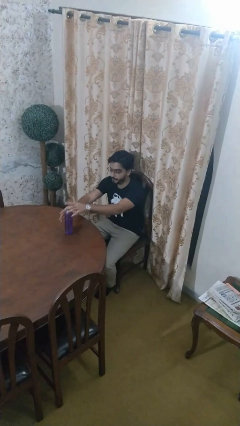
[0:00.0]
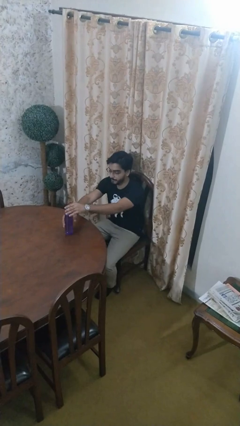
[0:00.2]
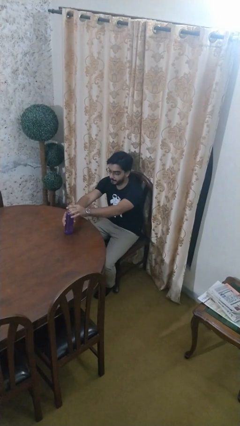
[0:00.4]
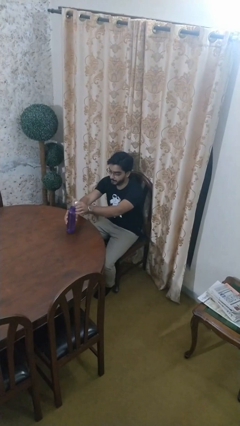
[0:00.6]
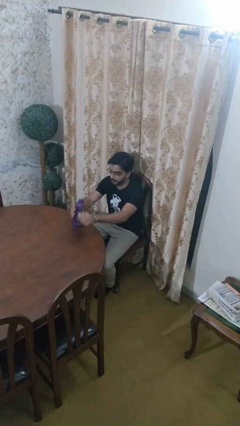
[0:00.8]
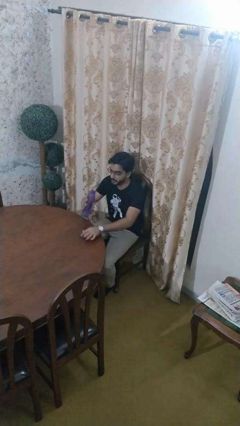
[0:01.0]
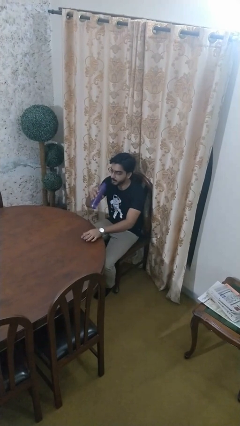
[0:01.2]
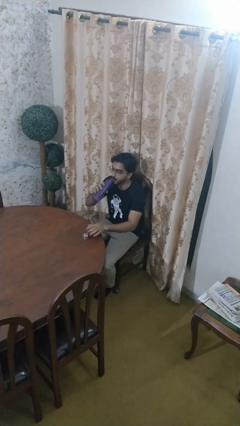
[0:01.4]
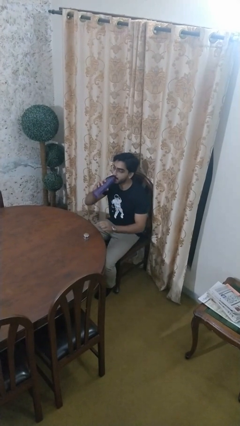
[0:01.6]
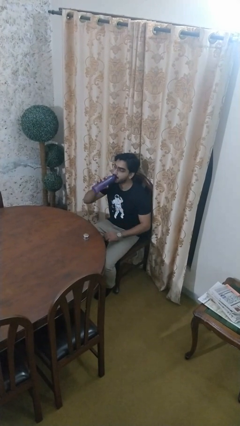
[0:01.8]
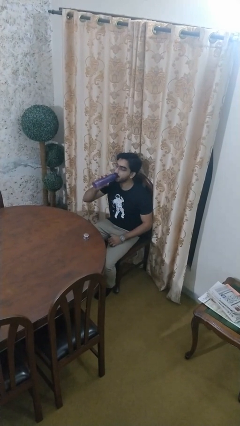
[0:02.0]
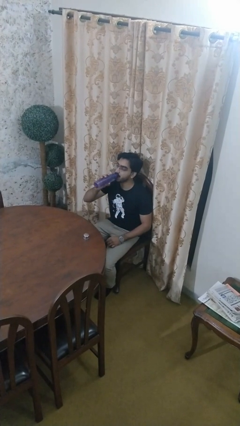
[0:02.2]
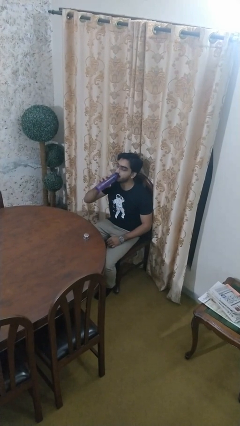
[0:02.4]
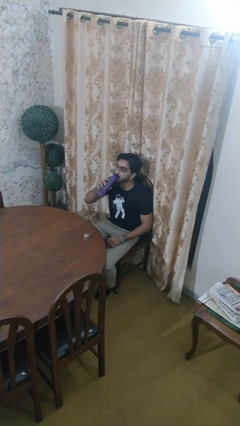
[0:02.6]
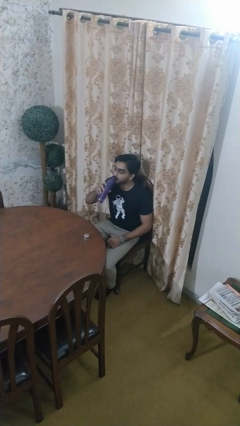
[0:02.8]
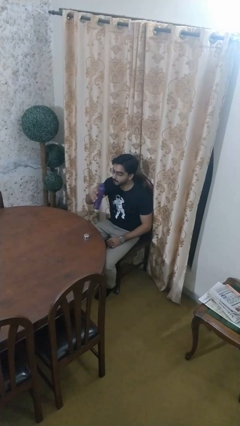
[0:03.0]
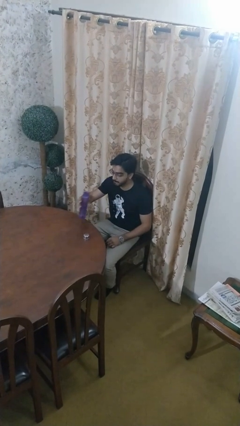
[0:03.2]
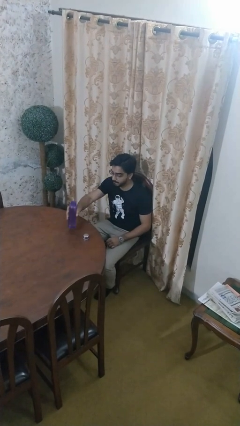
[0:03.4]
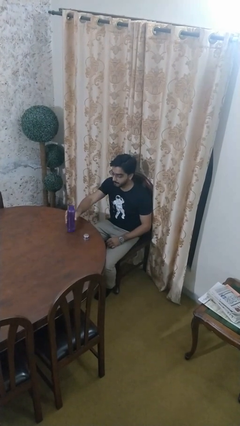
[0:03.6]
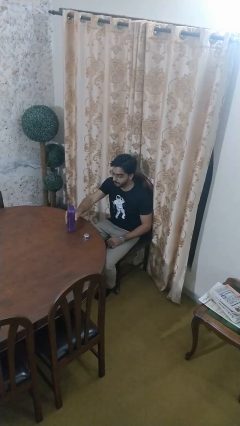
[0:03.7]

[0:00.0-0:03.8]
person drinks from bottle

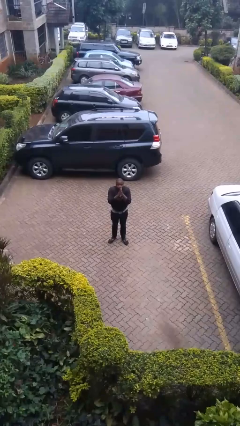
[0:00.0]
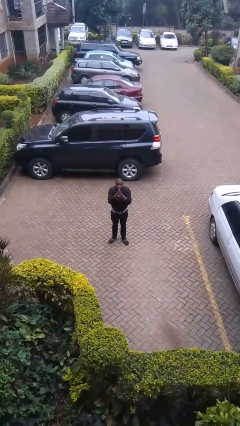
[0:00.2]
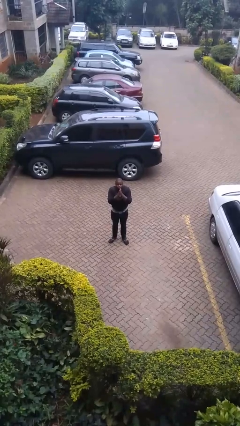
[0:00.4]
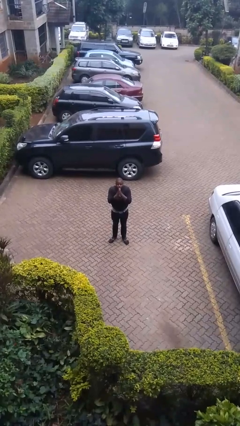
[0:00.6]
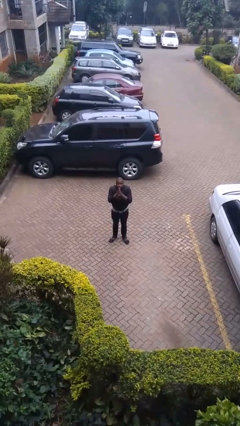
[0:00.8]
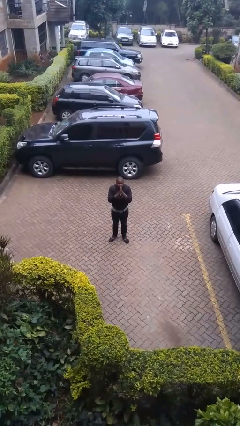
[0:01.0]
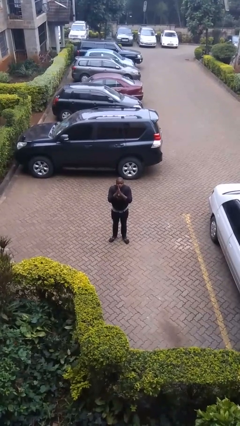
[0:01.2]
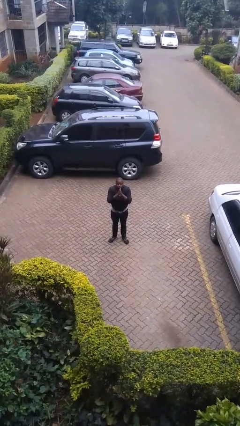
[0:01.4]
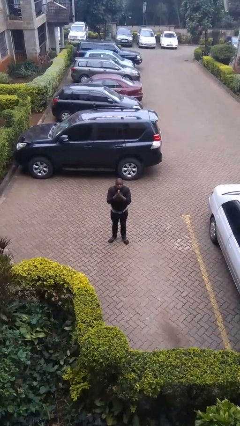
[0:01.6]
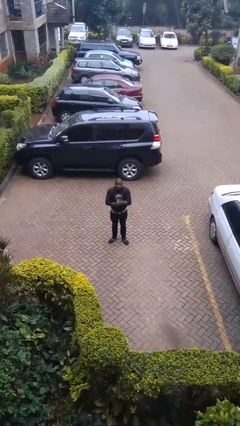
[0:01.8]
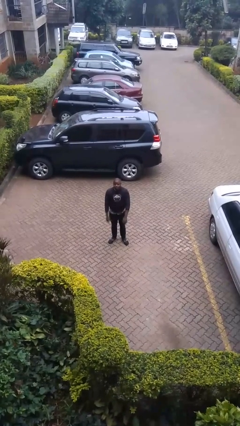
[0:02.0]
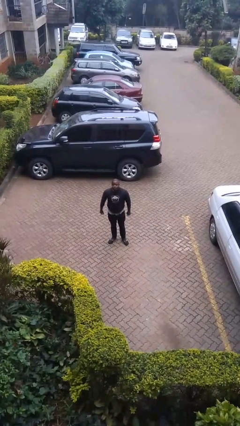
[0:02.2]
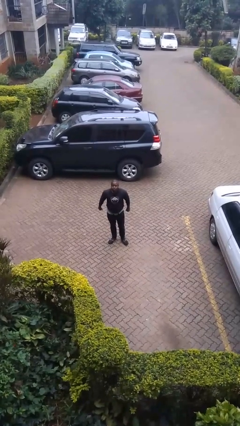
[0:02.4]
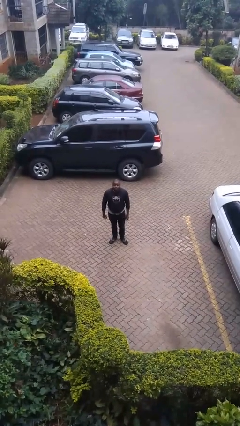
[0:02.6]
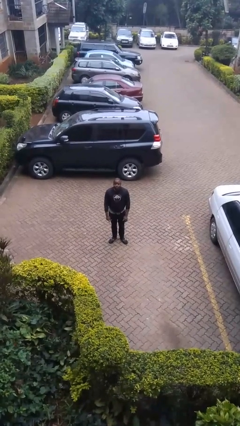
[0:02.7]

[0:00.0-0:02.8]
person blows into hands

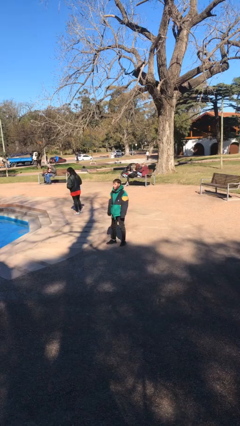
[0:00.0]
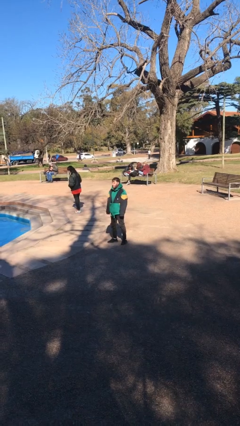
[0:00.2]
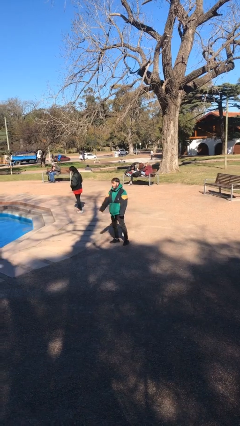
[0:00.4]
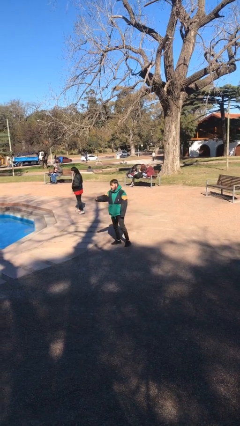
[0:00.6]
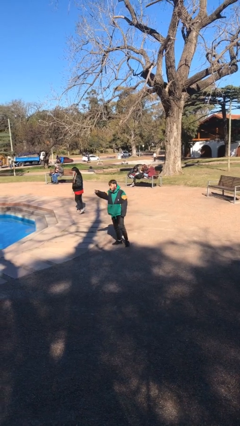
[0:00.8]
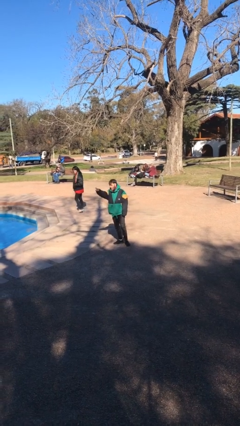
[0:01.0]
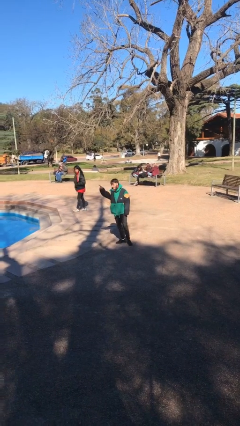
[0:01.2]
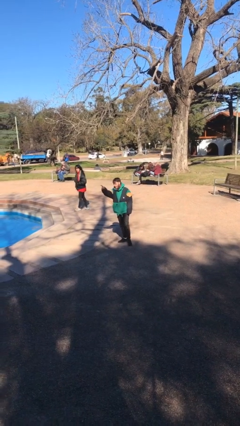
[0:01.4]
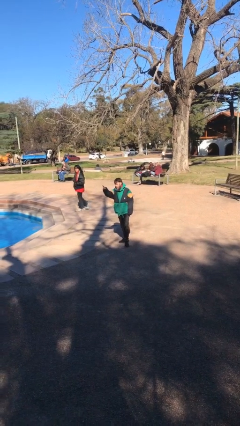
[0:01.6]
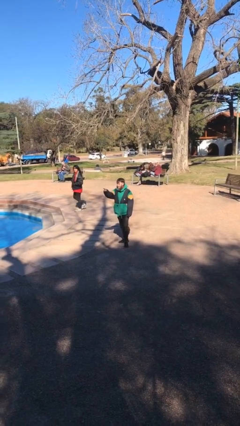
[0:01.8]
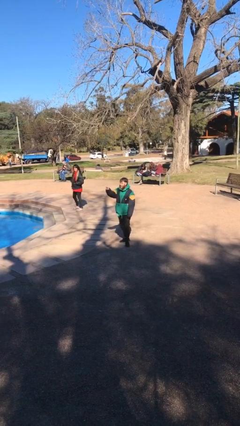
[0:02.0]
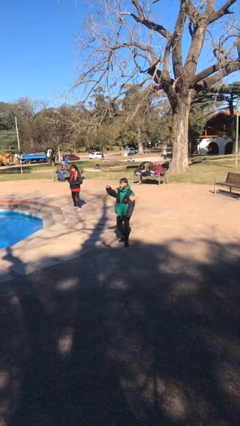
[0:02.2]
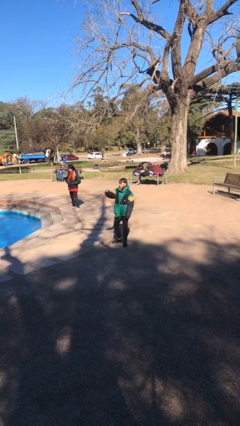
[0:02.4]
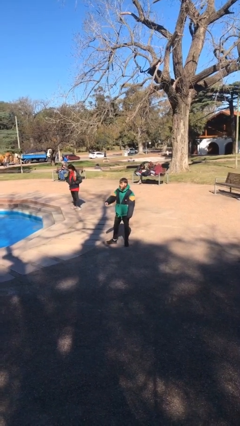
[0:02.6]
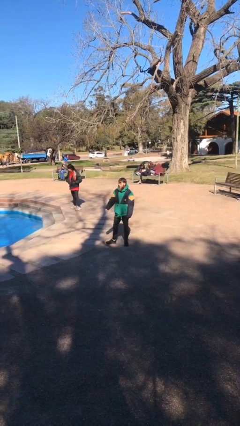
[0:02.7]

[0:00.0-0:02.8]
person points at person

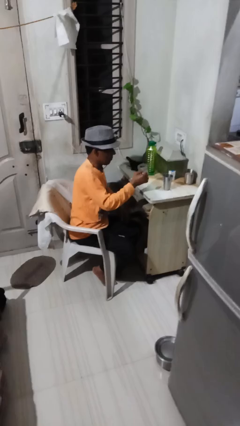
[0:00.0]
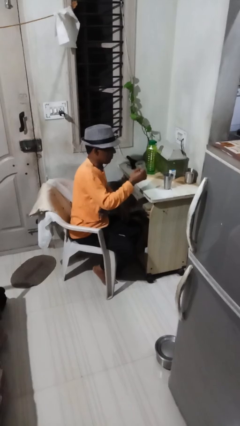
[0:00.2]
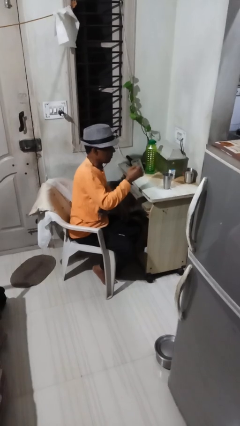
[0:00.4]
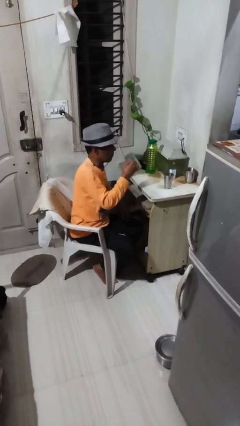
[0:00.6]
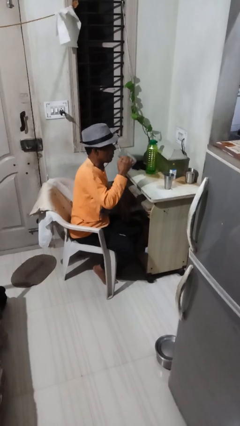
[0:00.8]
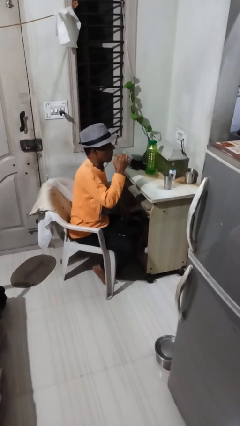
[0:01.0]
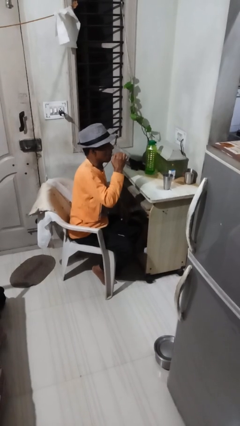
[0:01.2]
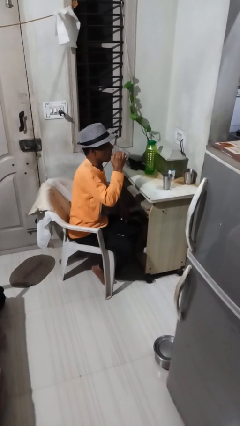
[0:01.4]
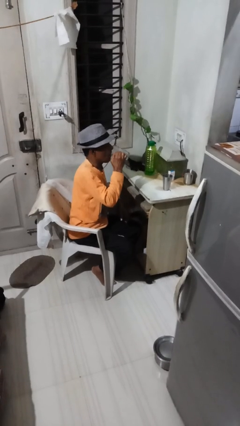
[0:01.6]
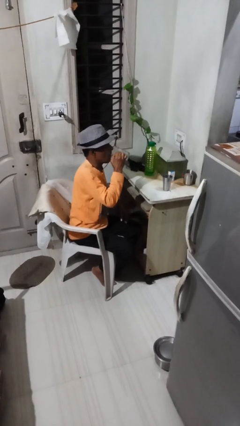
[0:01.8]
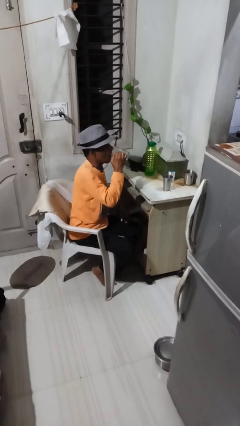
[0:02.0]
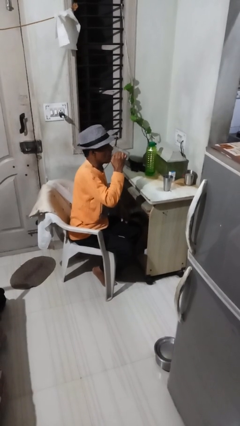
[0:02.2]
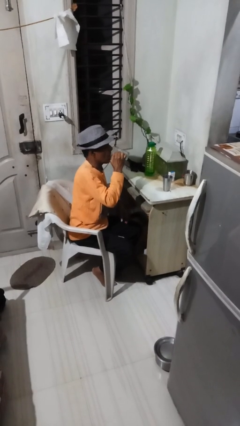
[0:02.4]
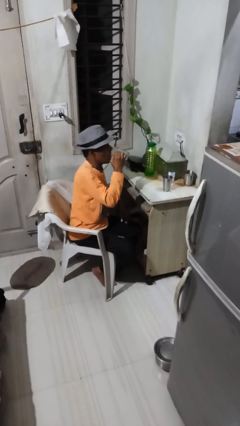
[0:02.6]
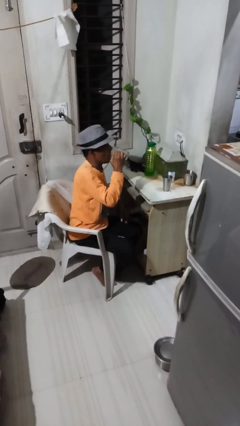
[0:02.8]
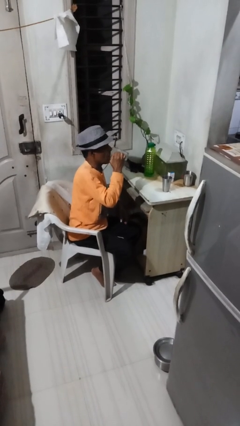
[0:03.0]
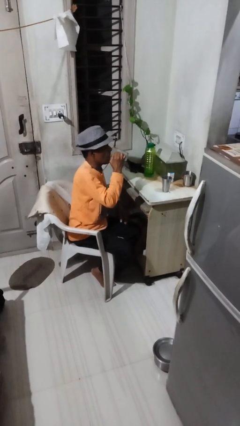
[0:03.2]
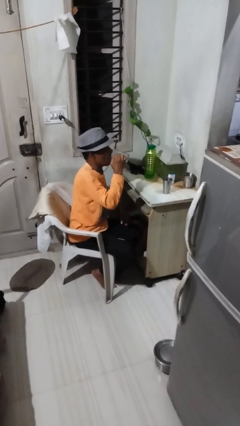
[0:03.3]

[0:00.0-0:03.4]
person drinks from mug

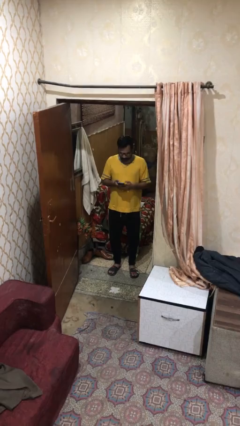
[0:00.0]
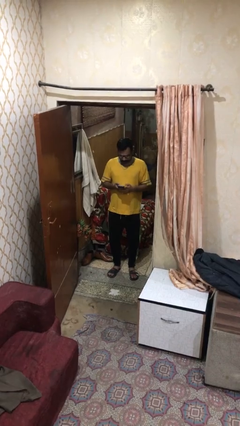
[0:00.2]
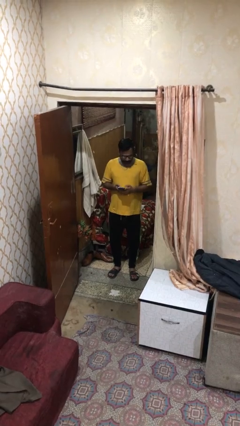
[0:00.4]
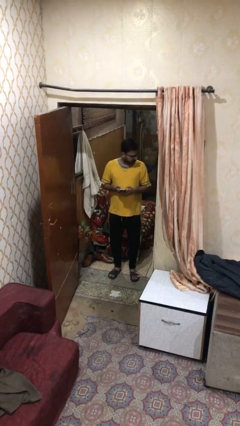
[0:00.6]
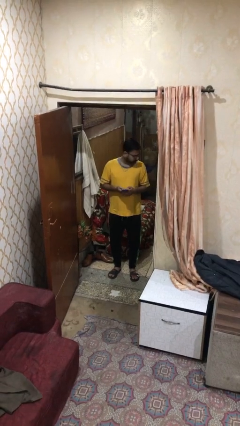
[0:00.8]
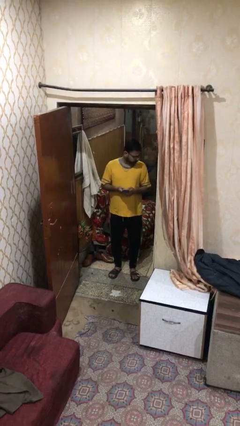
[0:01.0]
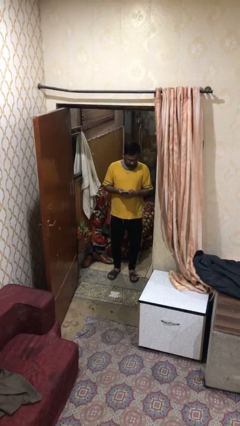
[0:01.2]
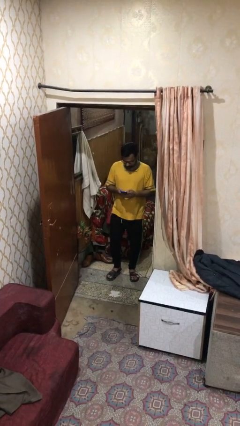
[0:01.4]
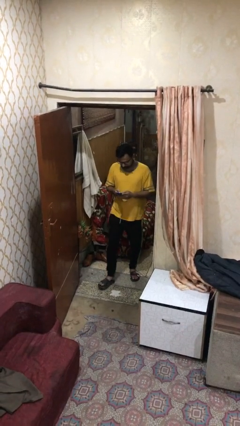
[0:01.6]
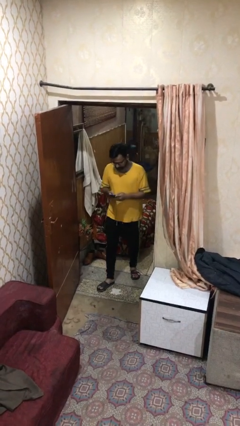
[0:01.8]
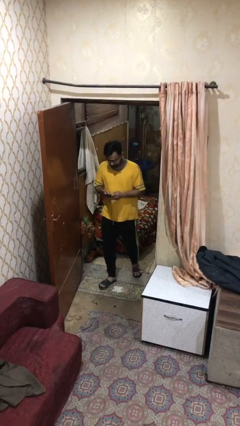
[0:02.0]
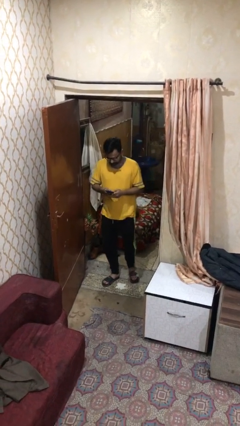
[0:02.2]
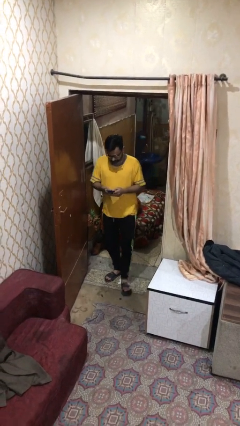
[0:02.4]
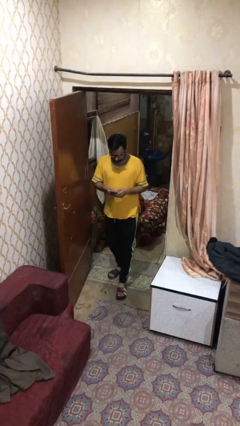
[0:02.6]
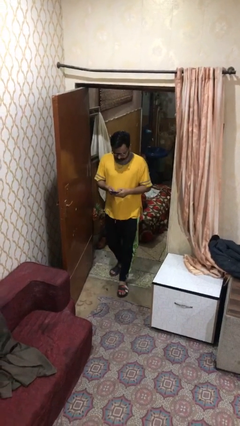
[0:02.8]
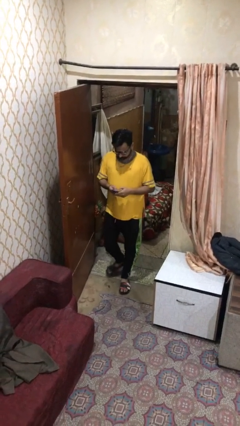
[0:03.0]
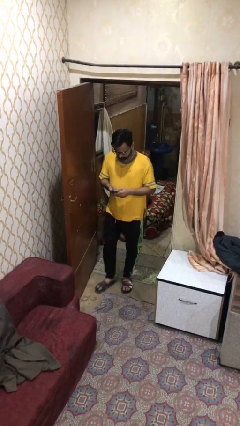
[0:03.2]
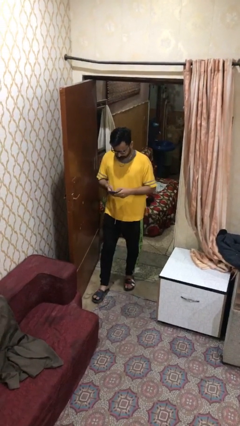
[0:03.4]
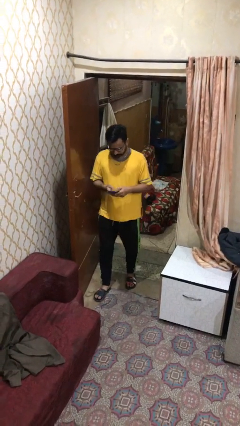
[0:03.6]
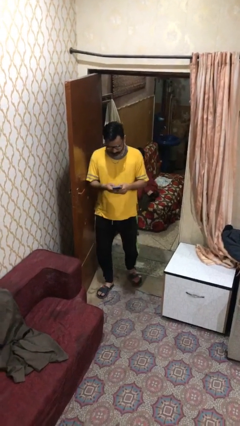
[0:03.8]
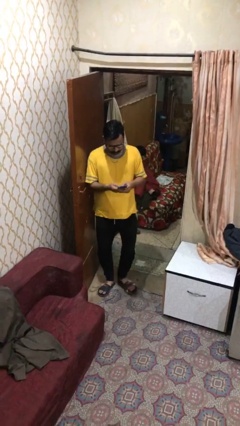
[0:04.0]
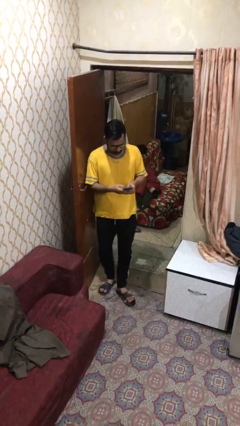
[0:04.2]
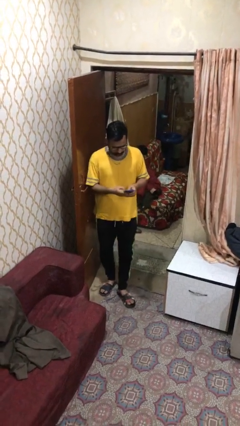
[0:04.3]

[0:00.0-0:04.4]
person enters scene through structure

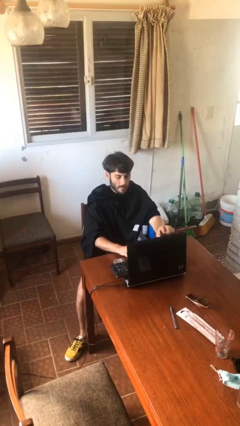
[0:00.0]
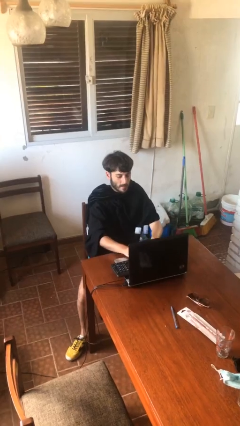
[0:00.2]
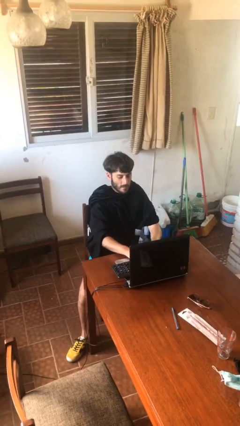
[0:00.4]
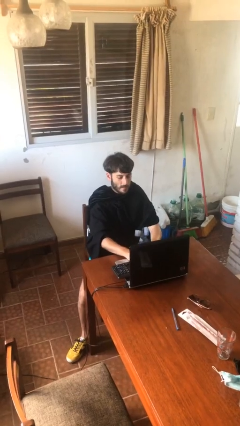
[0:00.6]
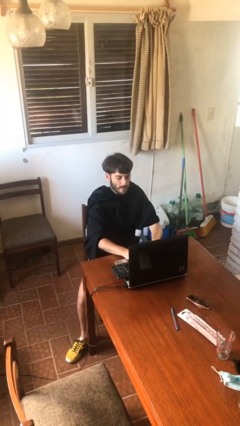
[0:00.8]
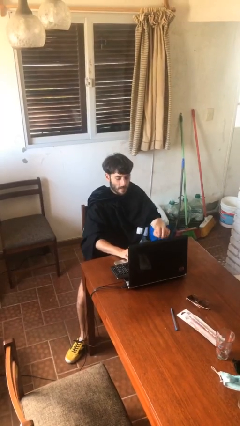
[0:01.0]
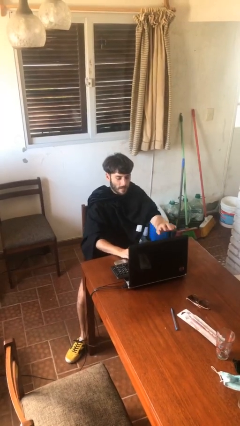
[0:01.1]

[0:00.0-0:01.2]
person interacts with laptop
